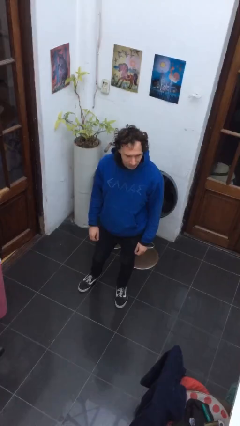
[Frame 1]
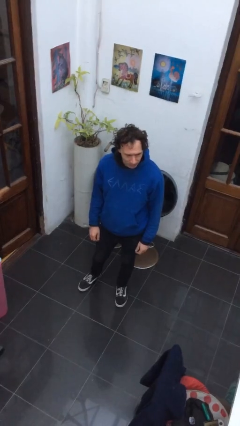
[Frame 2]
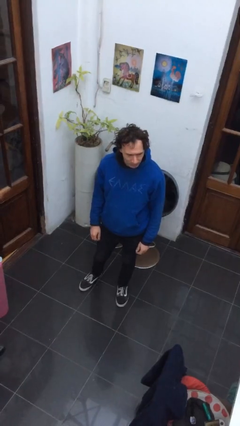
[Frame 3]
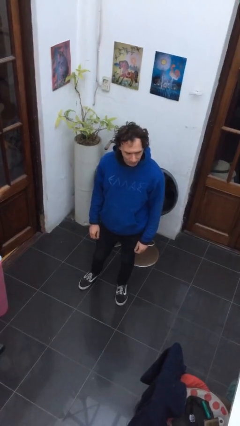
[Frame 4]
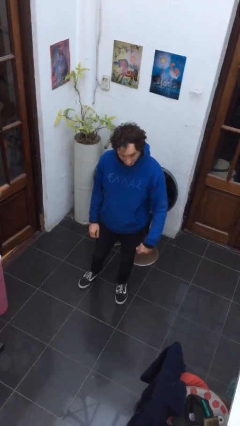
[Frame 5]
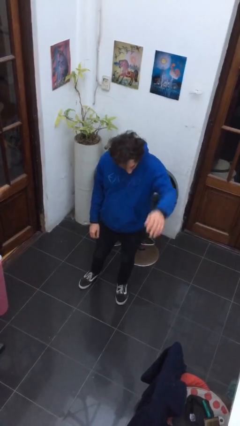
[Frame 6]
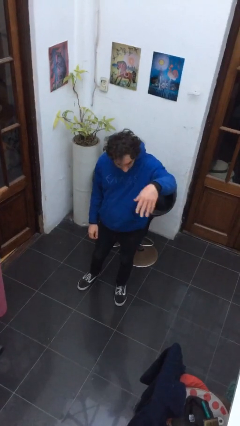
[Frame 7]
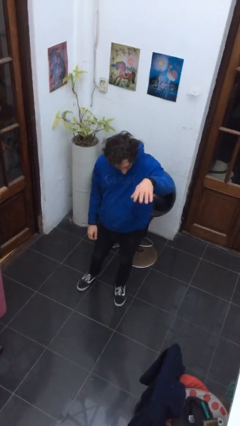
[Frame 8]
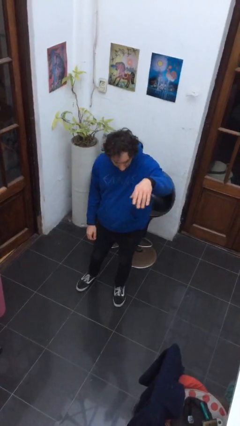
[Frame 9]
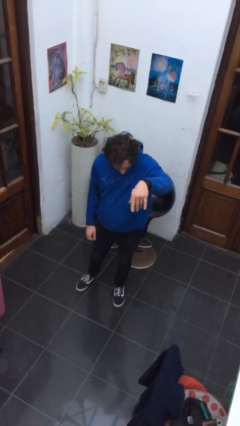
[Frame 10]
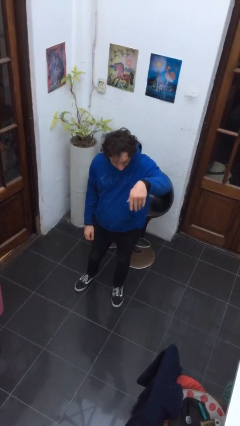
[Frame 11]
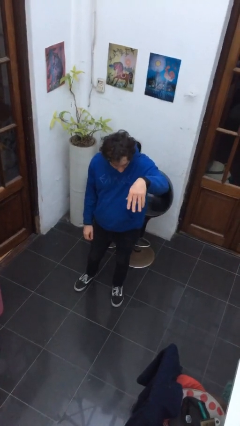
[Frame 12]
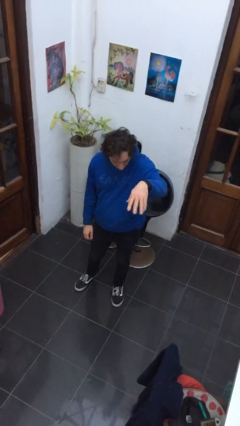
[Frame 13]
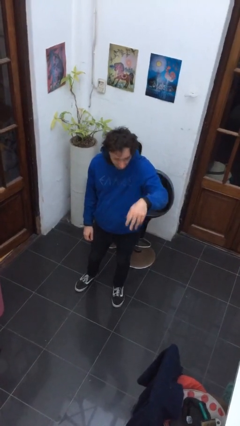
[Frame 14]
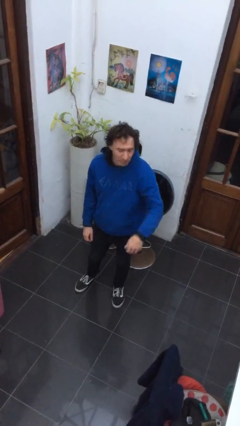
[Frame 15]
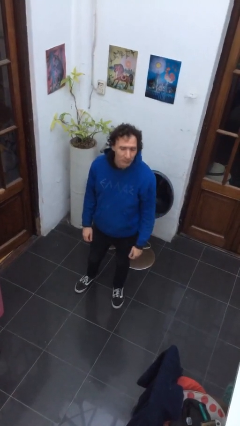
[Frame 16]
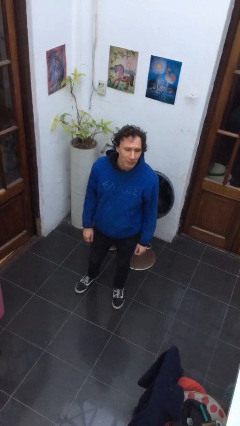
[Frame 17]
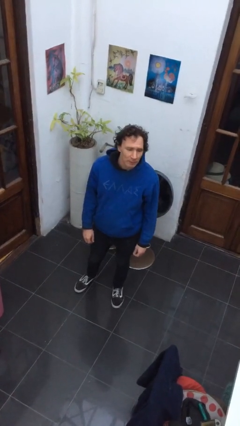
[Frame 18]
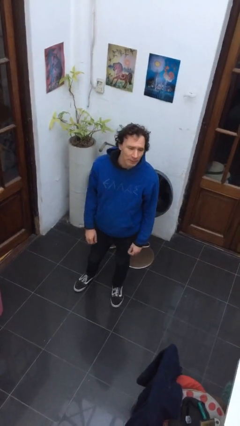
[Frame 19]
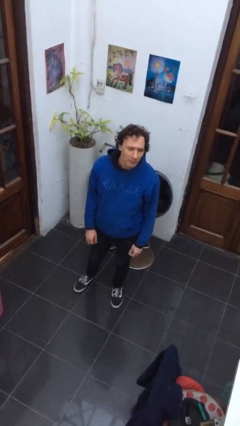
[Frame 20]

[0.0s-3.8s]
person gestures come here

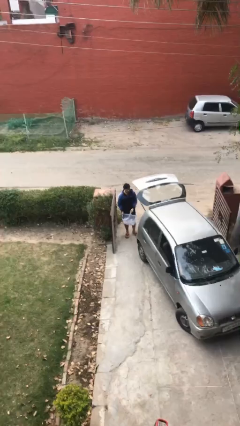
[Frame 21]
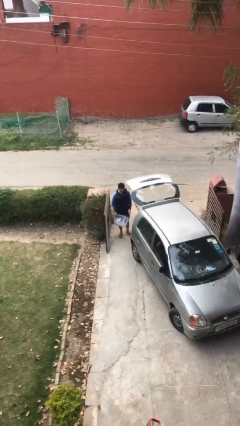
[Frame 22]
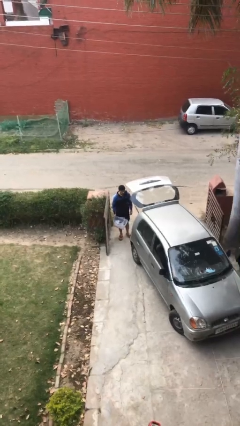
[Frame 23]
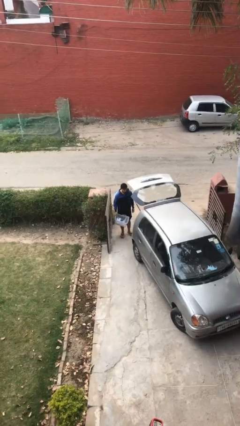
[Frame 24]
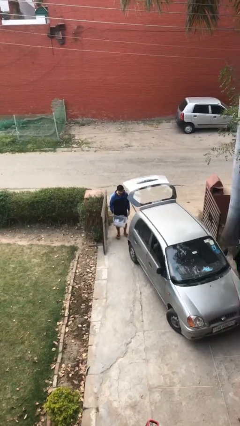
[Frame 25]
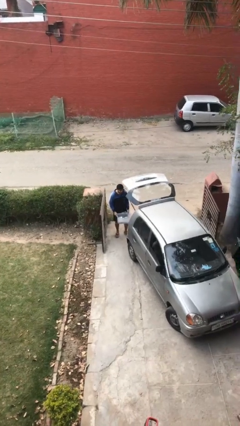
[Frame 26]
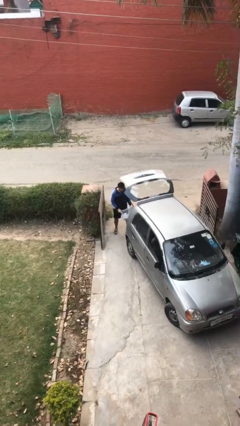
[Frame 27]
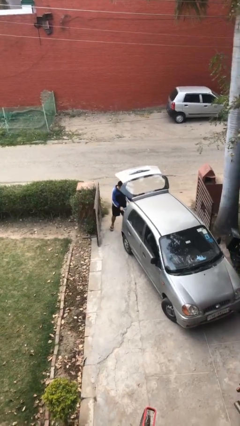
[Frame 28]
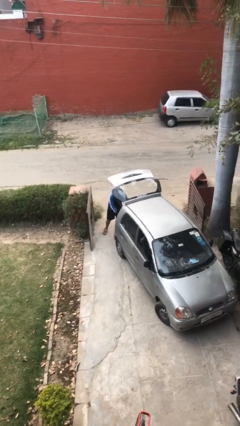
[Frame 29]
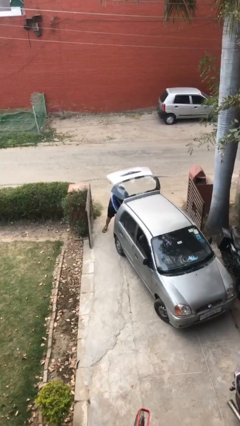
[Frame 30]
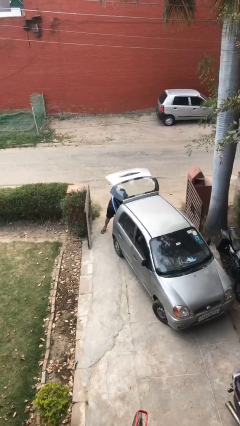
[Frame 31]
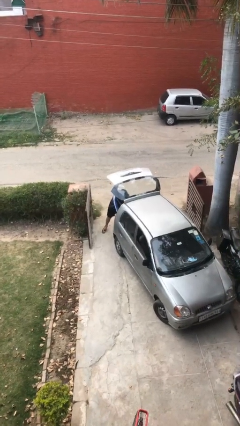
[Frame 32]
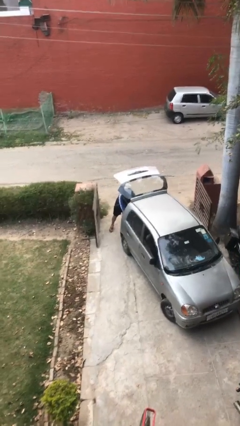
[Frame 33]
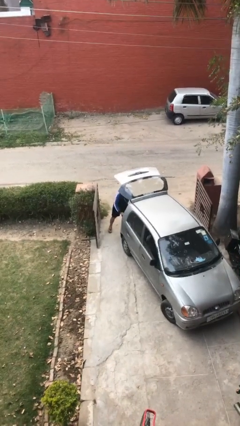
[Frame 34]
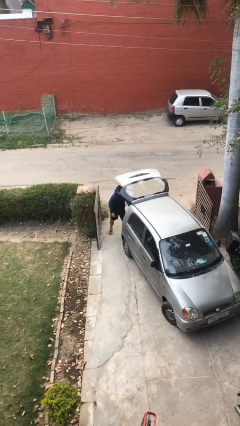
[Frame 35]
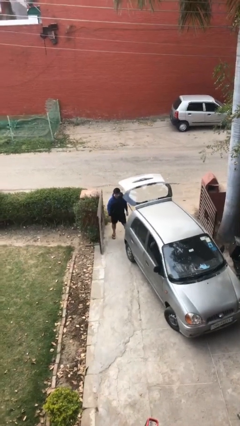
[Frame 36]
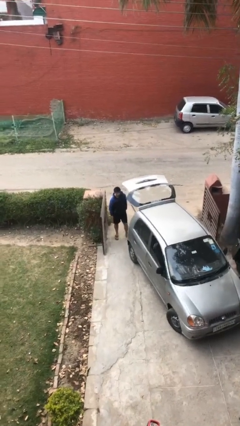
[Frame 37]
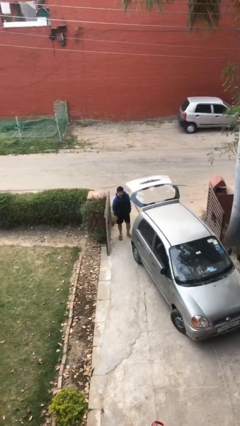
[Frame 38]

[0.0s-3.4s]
person loads car

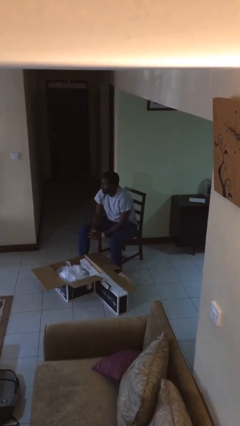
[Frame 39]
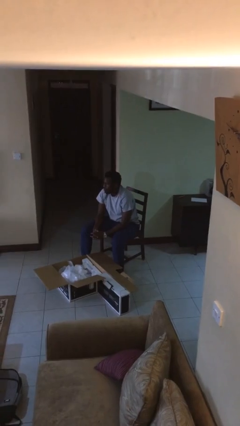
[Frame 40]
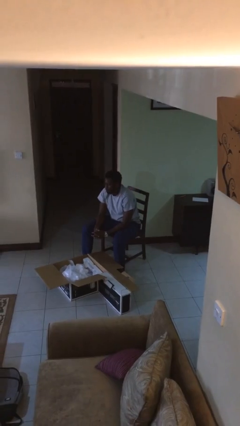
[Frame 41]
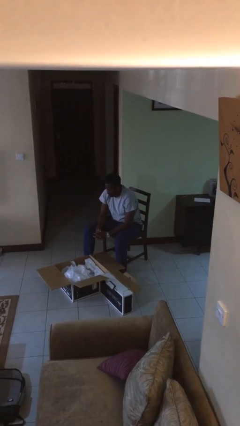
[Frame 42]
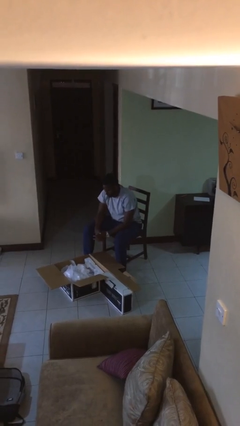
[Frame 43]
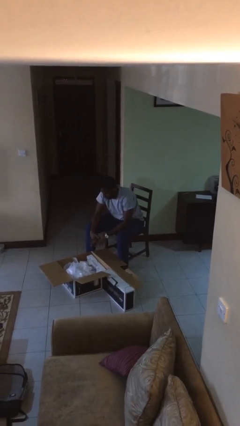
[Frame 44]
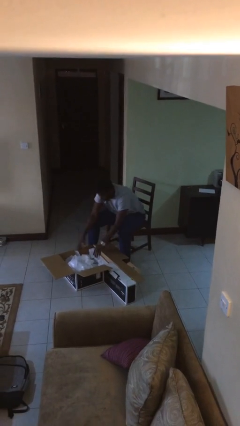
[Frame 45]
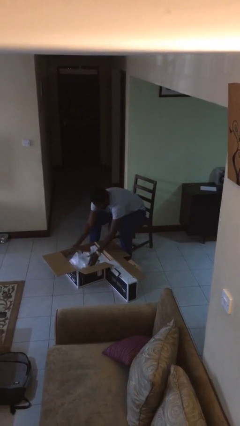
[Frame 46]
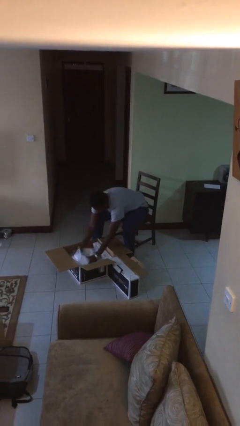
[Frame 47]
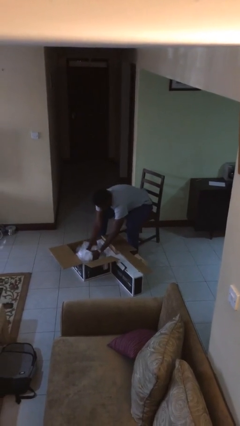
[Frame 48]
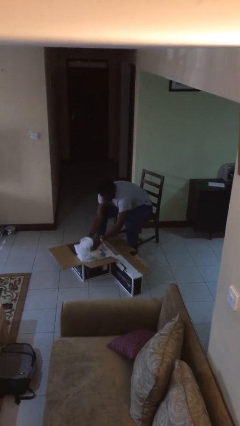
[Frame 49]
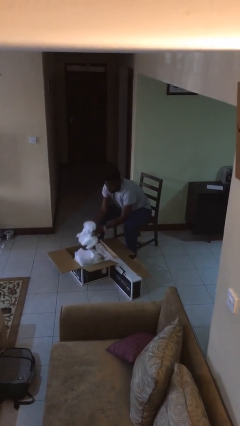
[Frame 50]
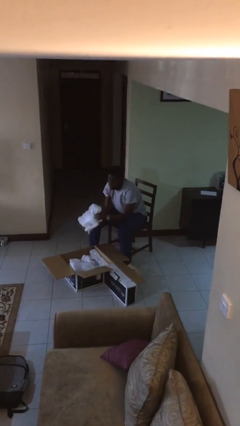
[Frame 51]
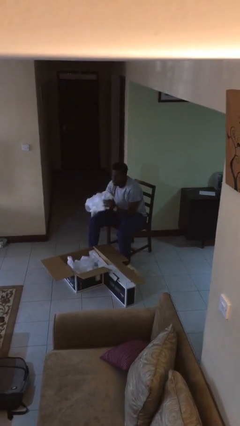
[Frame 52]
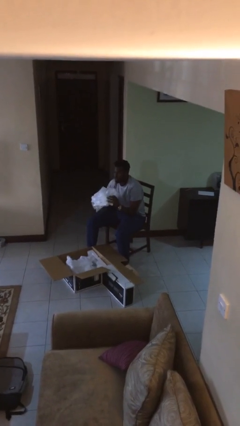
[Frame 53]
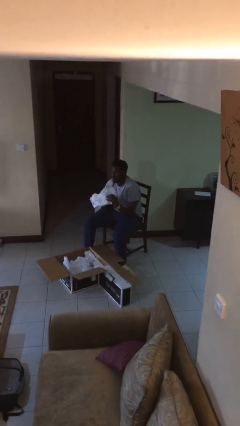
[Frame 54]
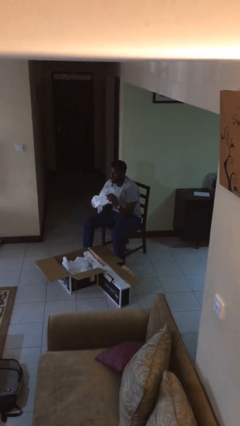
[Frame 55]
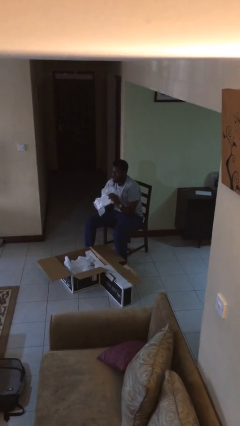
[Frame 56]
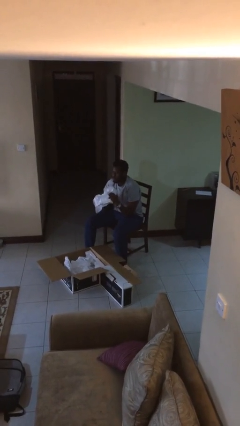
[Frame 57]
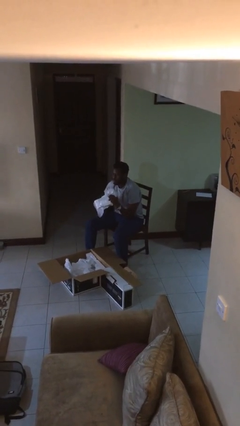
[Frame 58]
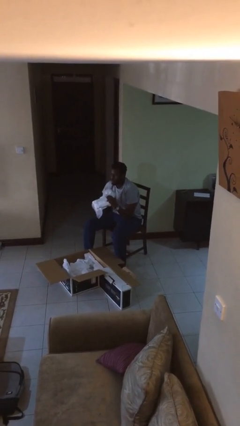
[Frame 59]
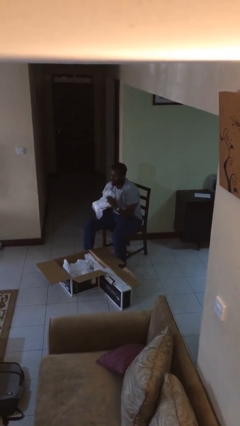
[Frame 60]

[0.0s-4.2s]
person takes object from box

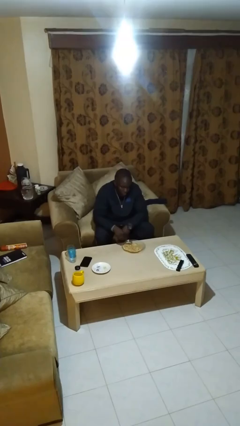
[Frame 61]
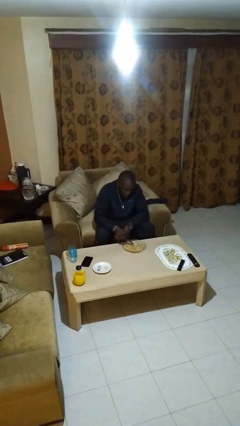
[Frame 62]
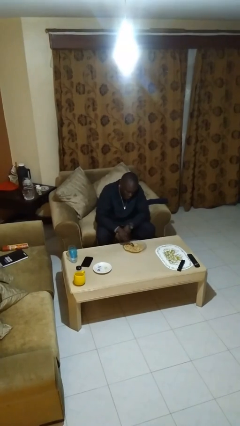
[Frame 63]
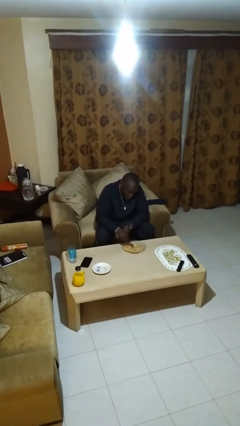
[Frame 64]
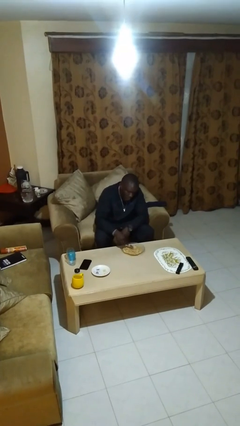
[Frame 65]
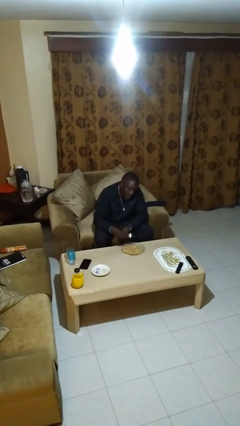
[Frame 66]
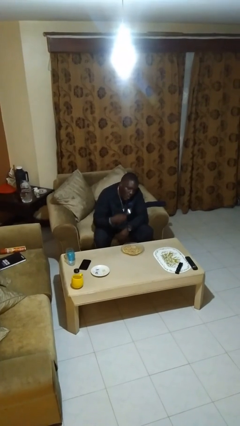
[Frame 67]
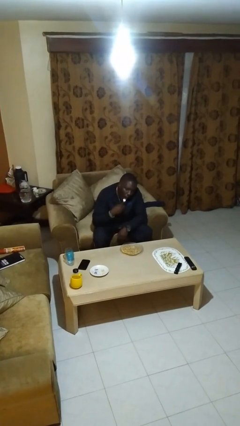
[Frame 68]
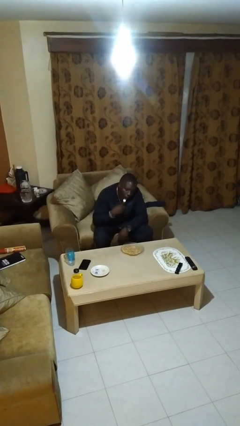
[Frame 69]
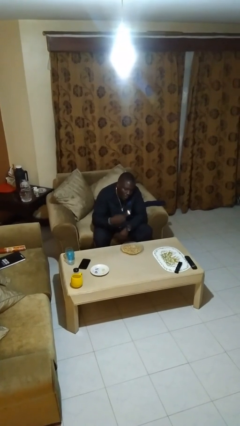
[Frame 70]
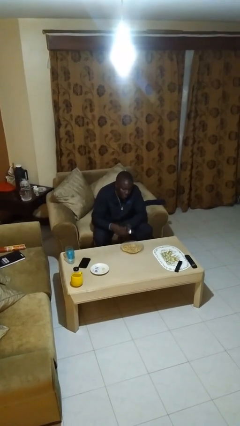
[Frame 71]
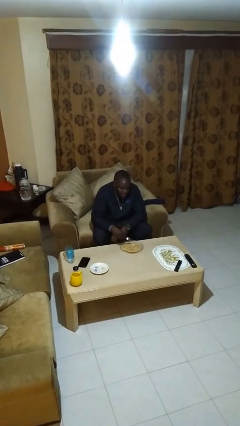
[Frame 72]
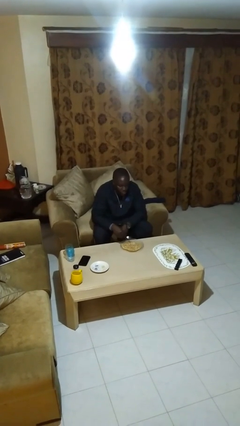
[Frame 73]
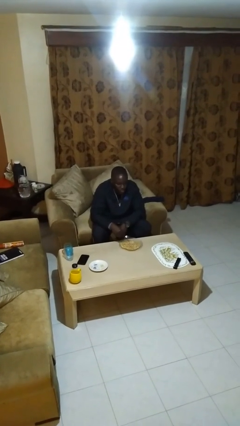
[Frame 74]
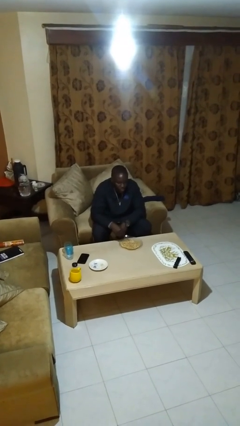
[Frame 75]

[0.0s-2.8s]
person eats with utensil

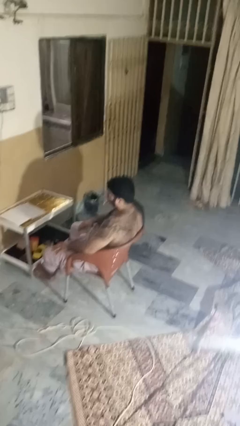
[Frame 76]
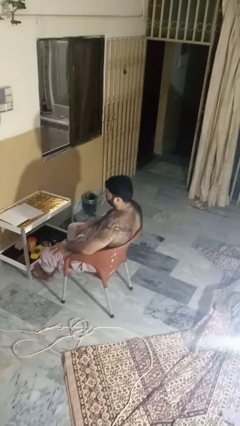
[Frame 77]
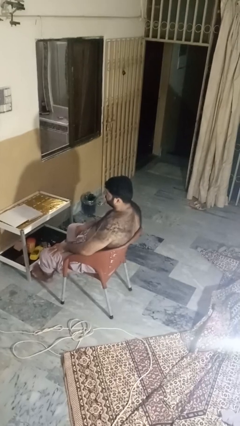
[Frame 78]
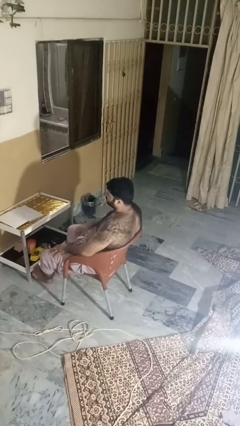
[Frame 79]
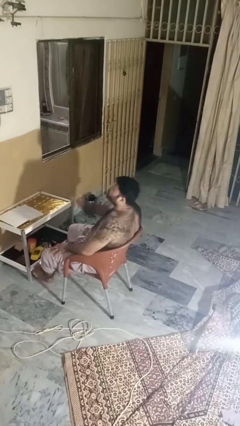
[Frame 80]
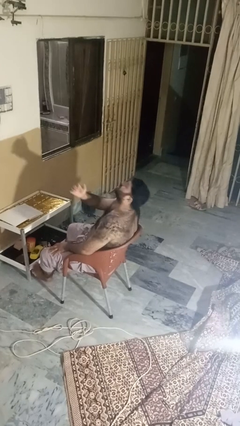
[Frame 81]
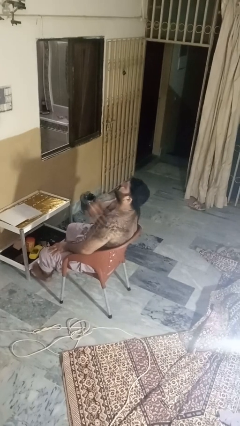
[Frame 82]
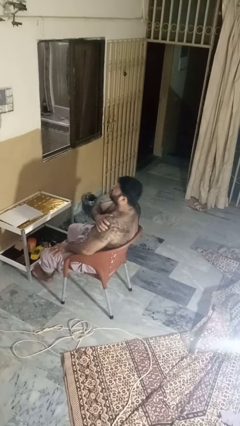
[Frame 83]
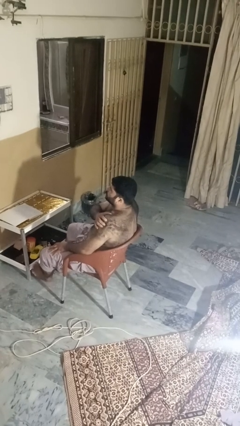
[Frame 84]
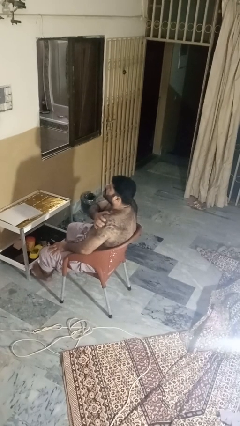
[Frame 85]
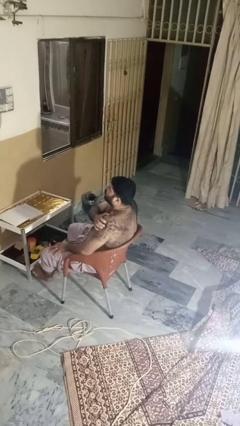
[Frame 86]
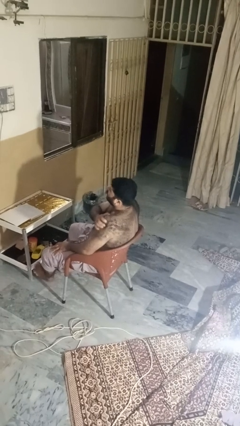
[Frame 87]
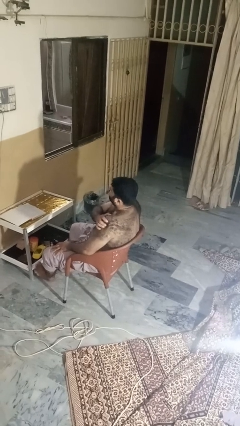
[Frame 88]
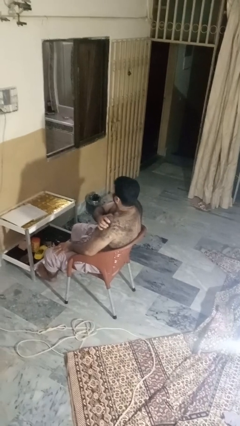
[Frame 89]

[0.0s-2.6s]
person shrugs

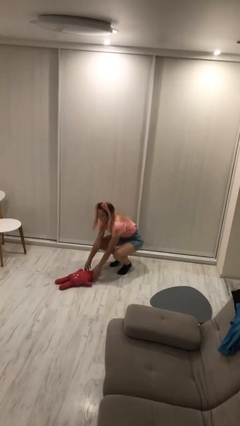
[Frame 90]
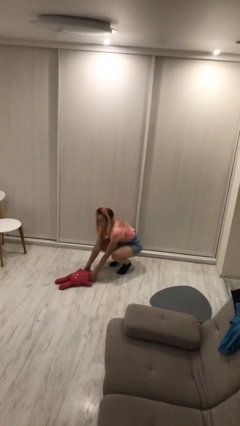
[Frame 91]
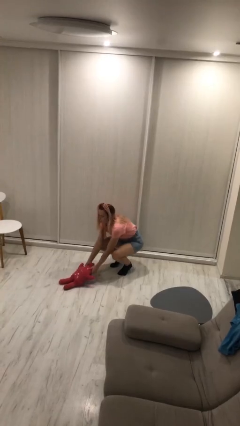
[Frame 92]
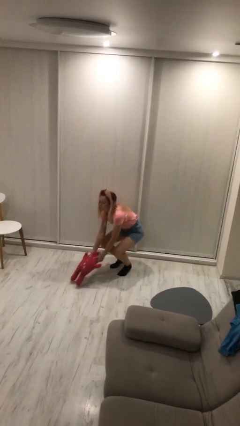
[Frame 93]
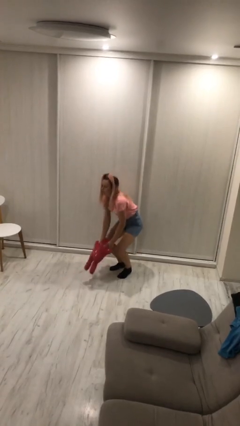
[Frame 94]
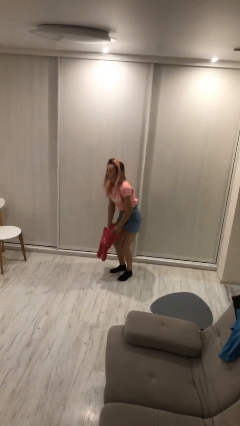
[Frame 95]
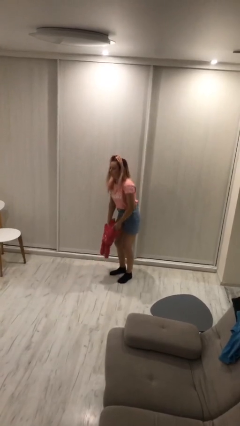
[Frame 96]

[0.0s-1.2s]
person picks up object from floor
